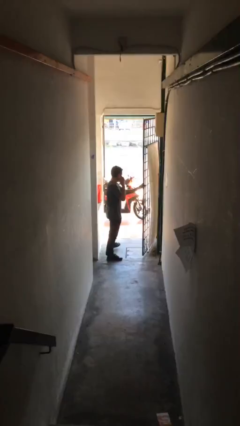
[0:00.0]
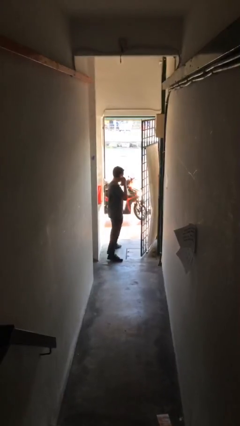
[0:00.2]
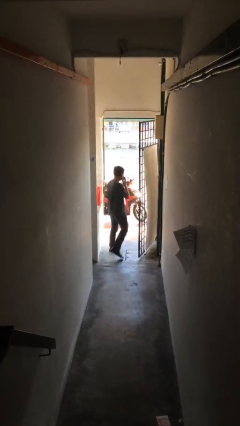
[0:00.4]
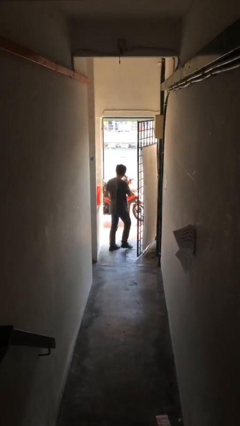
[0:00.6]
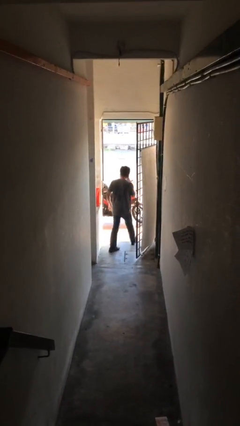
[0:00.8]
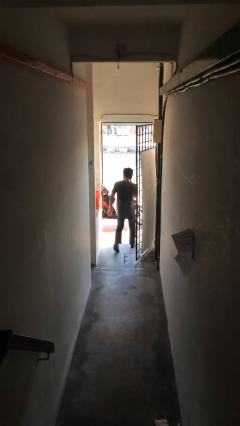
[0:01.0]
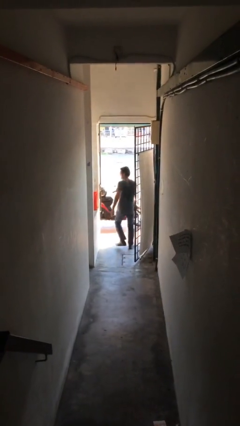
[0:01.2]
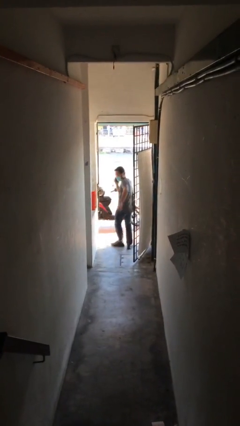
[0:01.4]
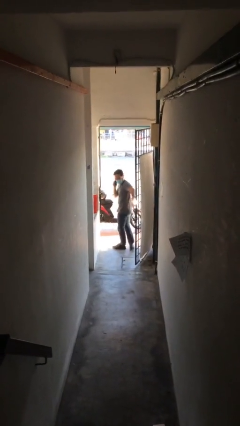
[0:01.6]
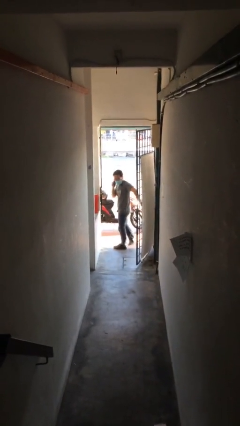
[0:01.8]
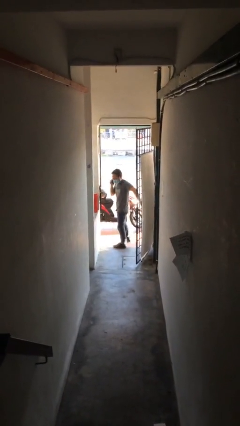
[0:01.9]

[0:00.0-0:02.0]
person exits scene through structure

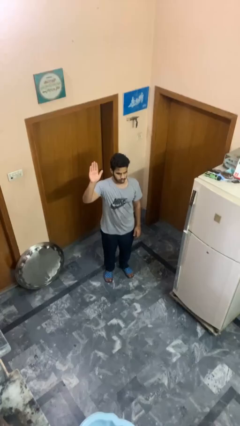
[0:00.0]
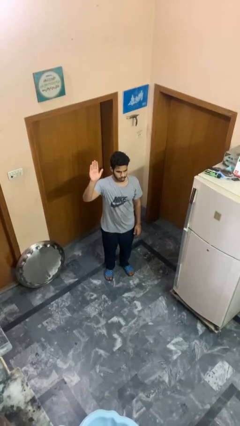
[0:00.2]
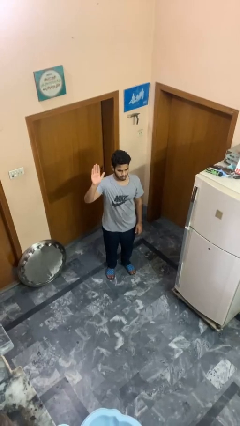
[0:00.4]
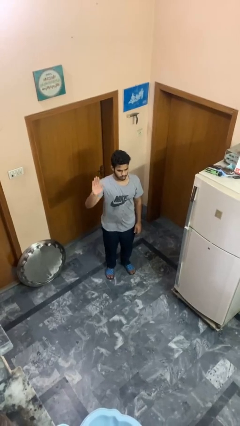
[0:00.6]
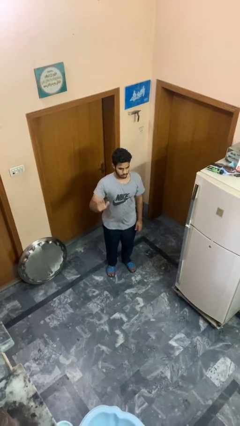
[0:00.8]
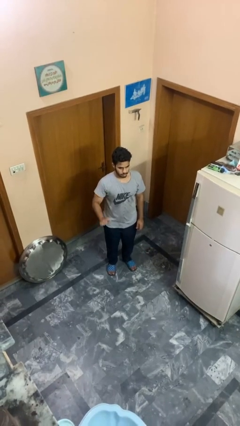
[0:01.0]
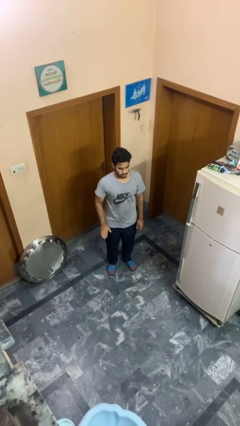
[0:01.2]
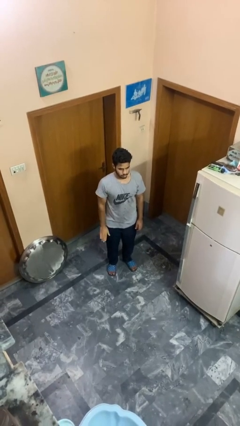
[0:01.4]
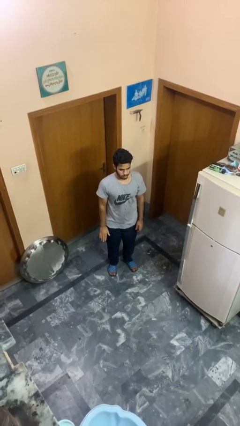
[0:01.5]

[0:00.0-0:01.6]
person gestures lower hand

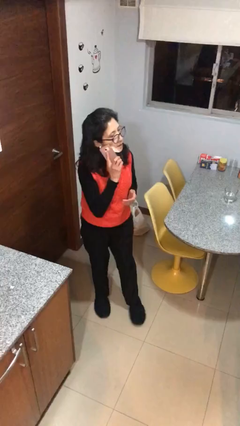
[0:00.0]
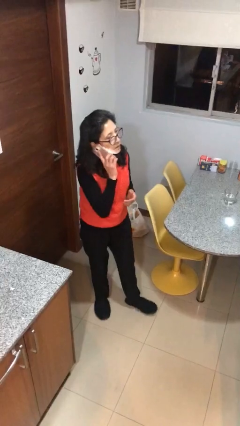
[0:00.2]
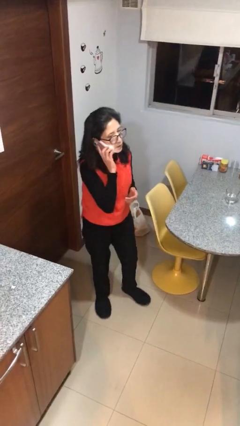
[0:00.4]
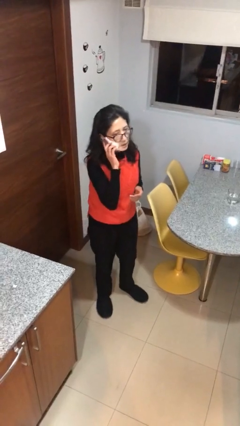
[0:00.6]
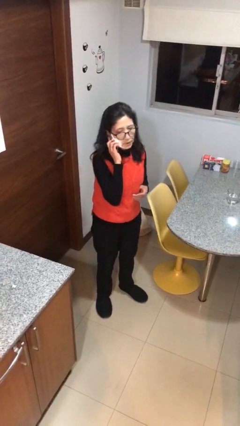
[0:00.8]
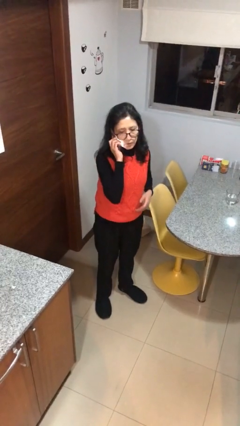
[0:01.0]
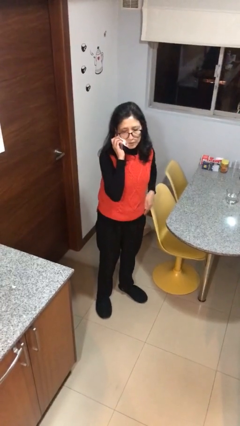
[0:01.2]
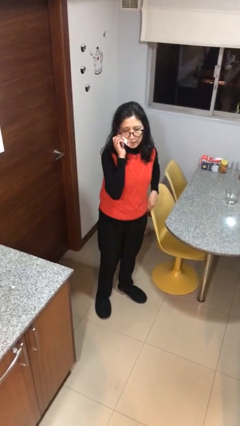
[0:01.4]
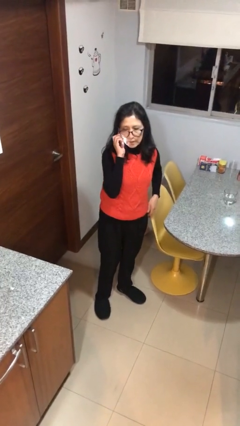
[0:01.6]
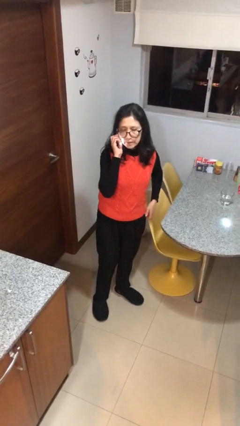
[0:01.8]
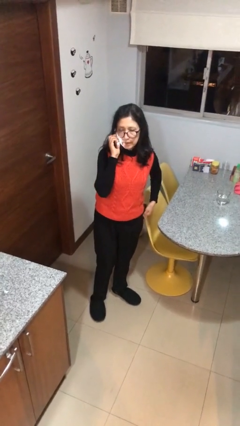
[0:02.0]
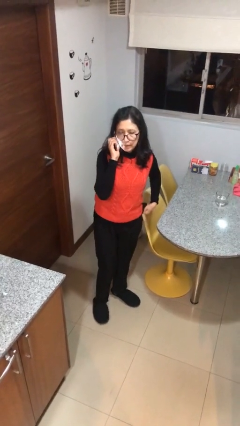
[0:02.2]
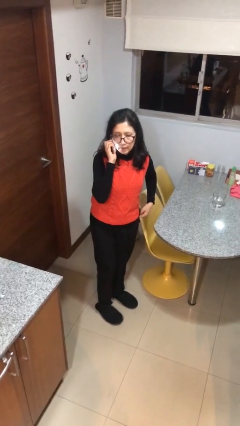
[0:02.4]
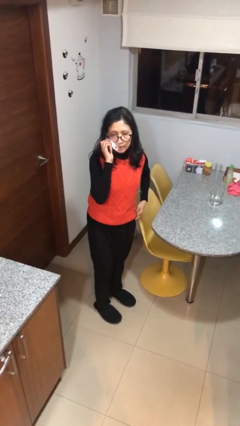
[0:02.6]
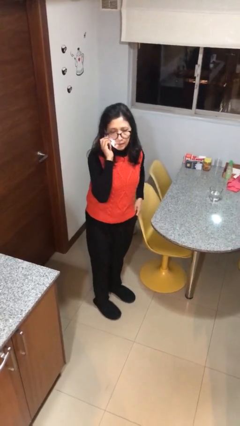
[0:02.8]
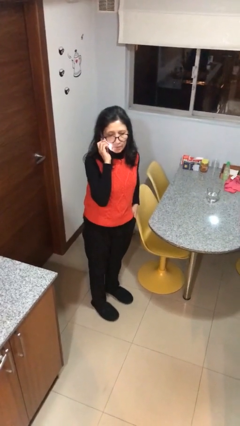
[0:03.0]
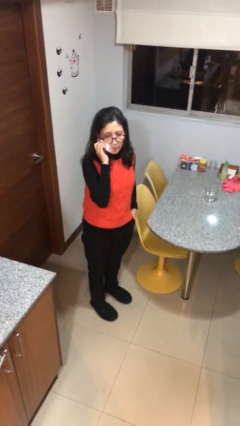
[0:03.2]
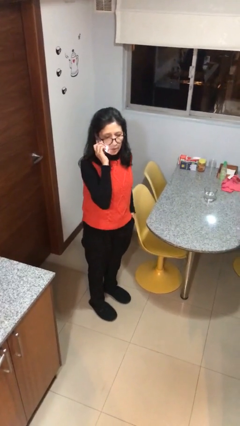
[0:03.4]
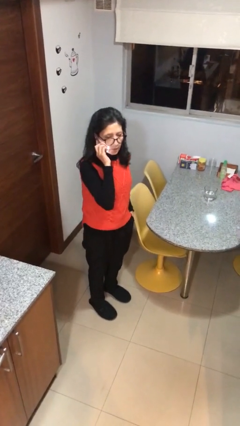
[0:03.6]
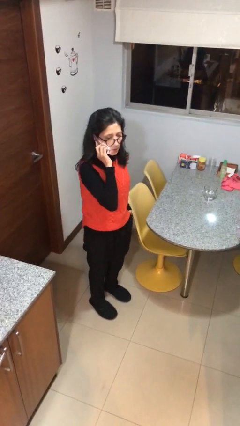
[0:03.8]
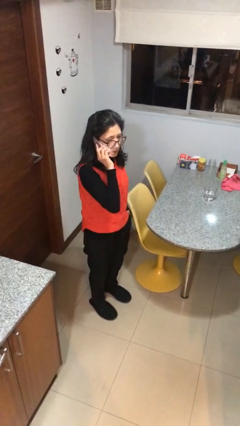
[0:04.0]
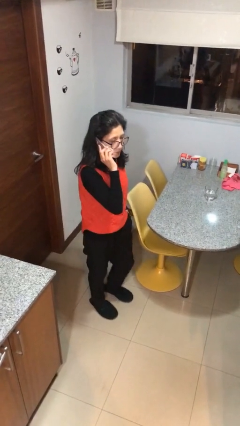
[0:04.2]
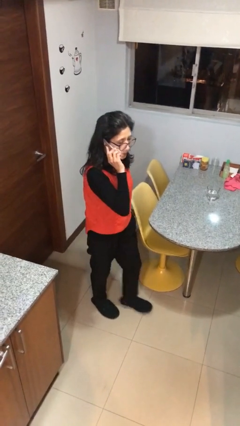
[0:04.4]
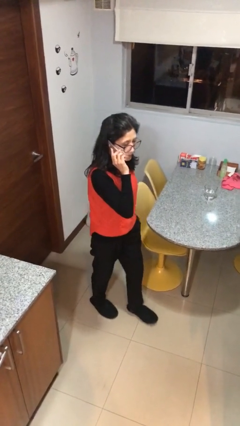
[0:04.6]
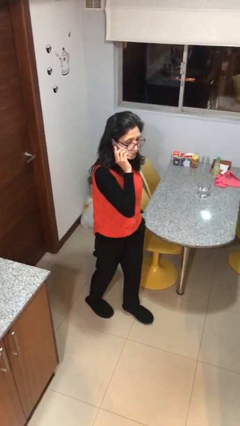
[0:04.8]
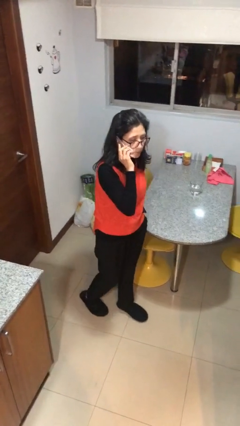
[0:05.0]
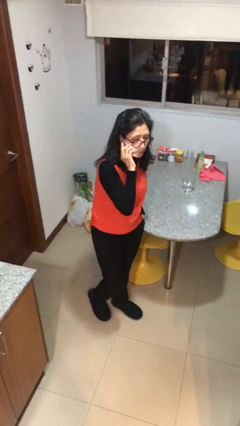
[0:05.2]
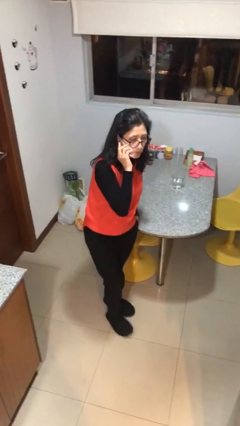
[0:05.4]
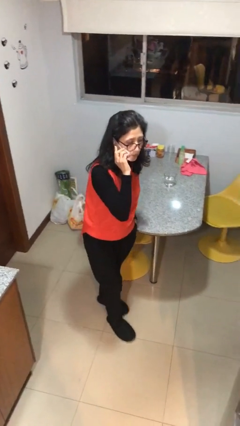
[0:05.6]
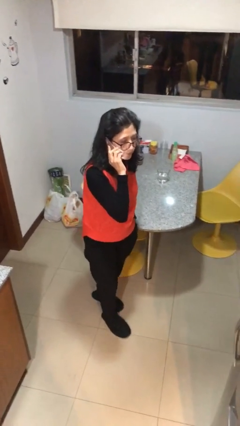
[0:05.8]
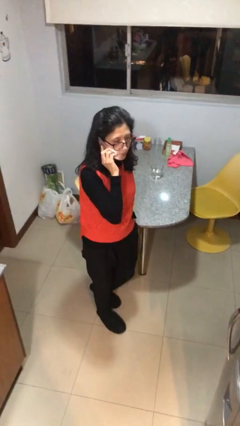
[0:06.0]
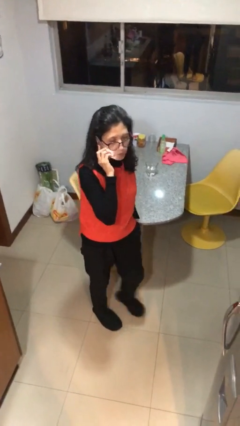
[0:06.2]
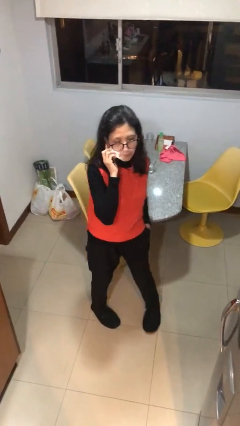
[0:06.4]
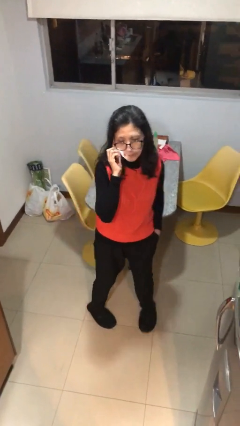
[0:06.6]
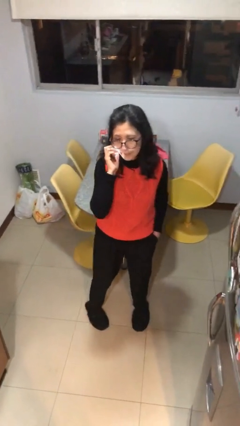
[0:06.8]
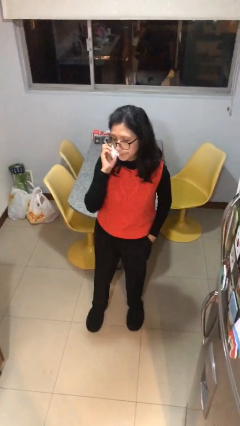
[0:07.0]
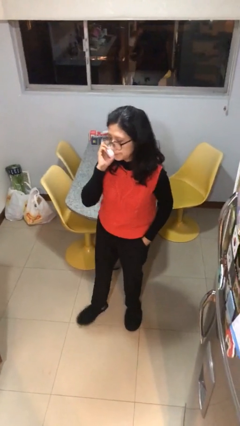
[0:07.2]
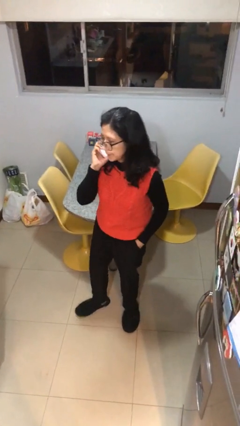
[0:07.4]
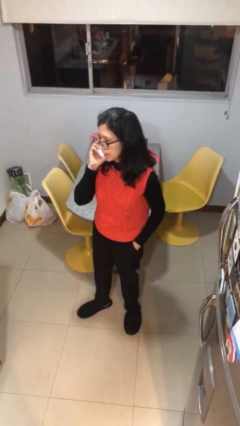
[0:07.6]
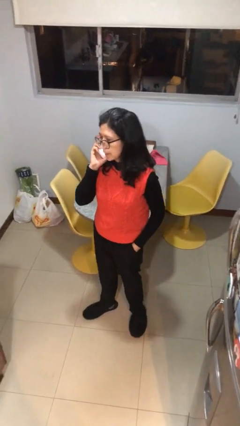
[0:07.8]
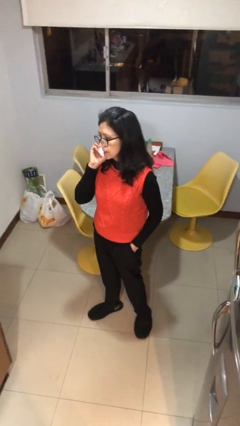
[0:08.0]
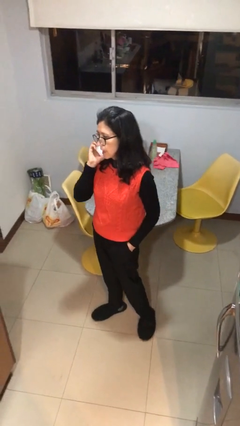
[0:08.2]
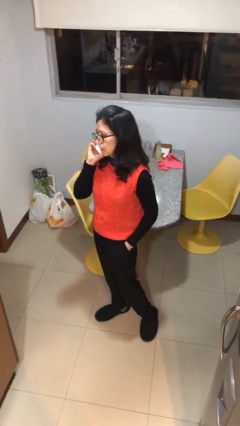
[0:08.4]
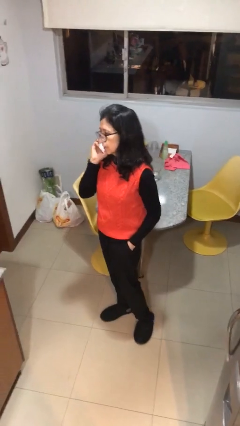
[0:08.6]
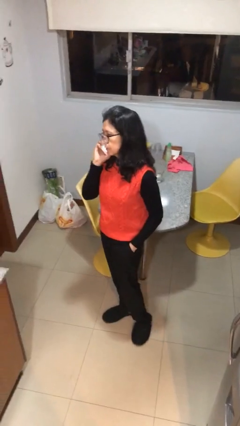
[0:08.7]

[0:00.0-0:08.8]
person talks on phone

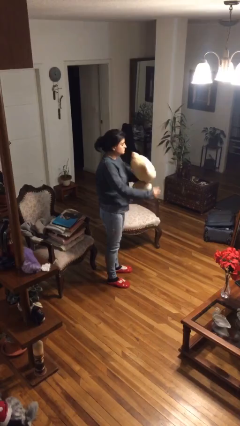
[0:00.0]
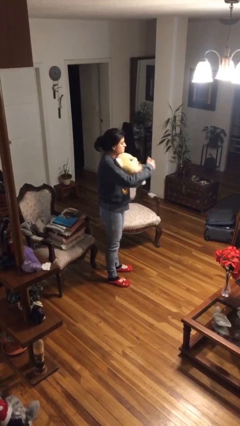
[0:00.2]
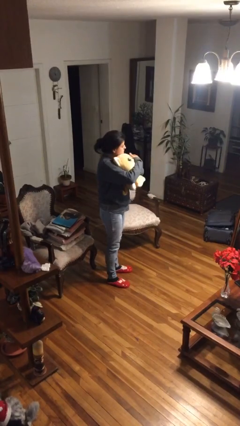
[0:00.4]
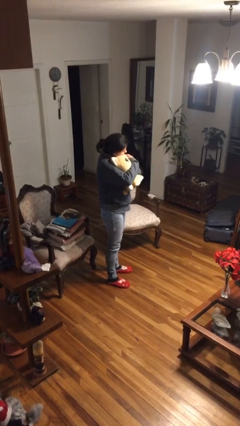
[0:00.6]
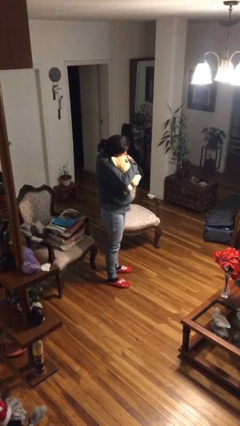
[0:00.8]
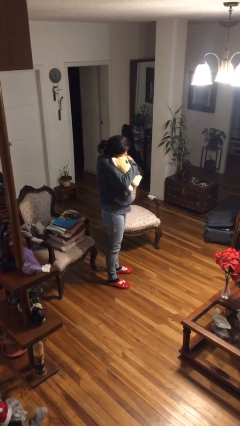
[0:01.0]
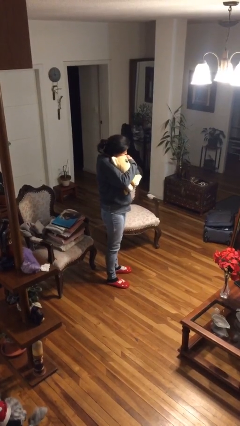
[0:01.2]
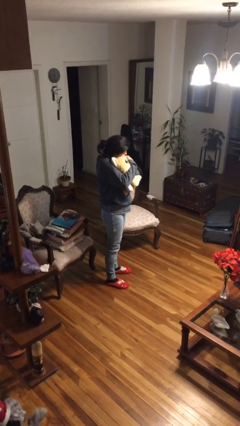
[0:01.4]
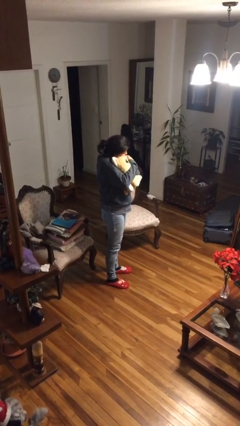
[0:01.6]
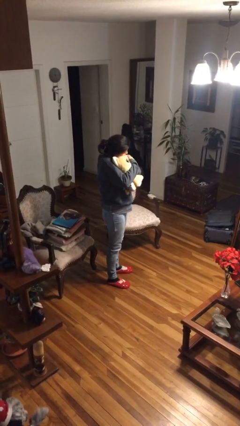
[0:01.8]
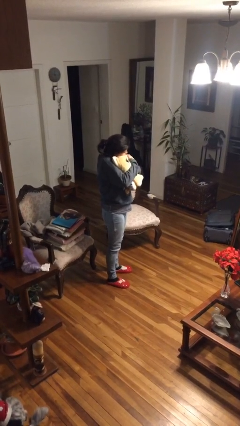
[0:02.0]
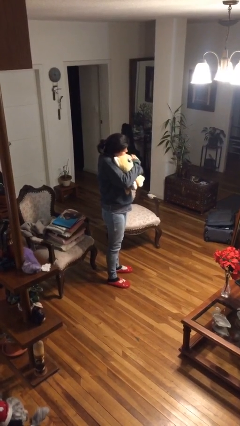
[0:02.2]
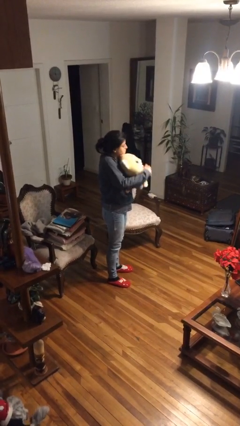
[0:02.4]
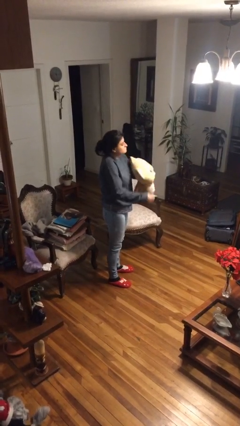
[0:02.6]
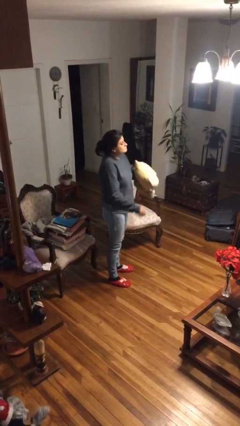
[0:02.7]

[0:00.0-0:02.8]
person hugs stuffed animal

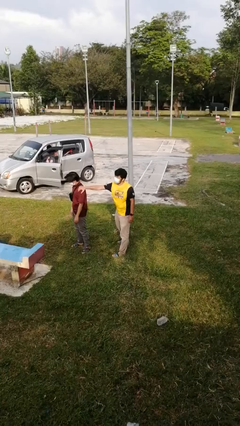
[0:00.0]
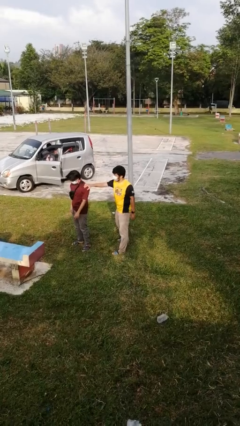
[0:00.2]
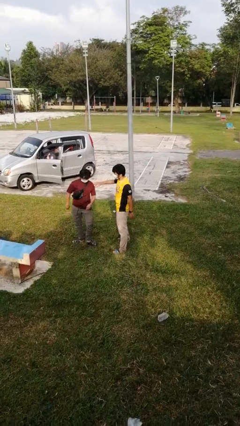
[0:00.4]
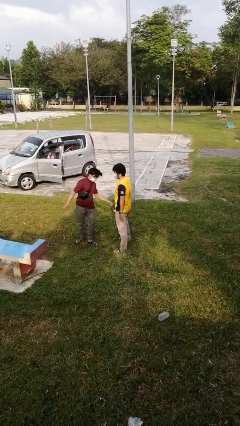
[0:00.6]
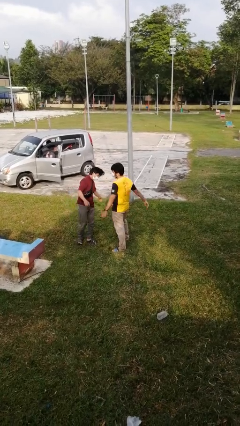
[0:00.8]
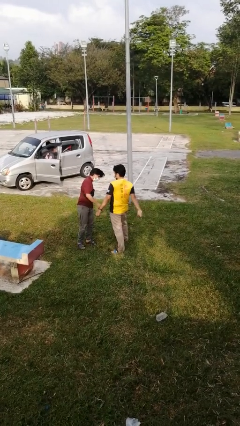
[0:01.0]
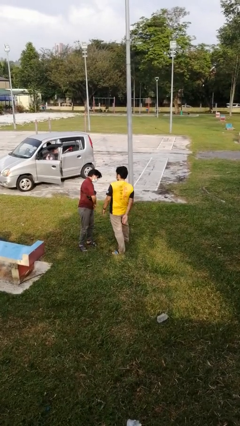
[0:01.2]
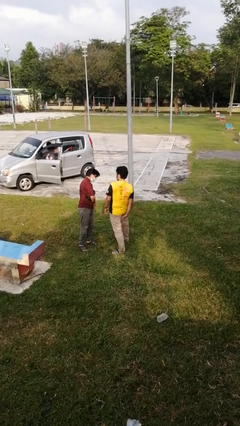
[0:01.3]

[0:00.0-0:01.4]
person spins person around

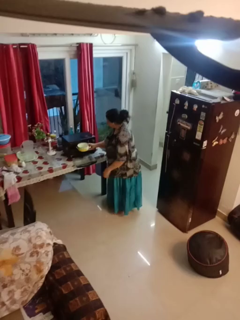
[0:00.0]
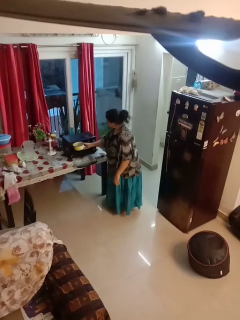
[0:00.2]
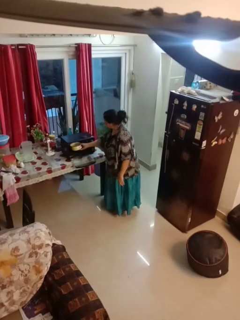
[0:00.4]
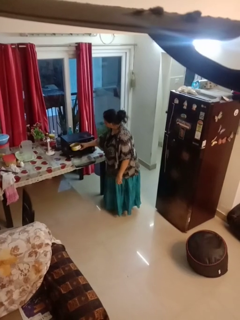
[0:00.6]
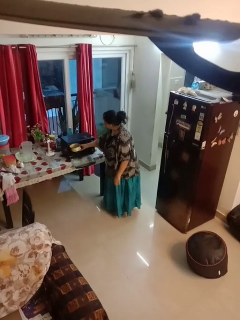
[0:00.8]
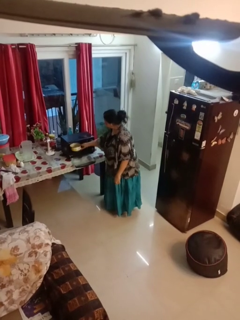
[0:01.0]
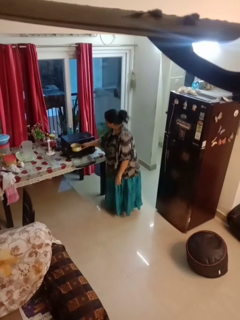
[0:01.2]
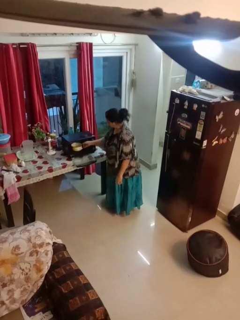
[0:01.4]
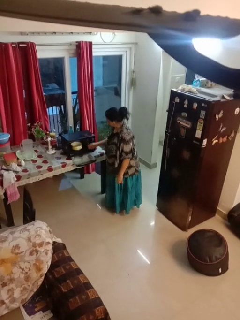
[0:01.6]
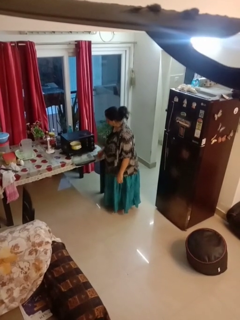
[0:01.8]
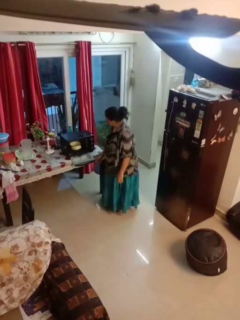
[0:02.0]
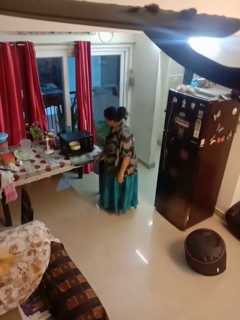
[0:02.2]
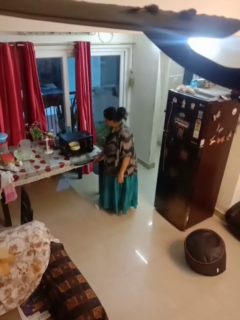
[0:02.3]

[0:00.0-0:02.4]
person puts object into microwave
